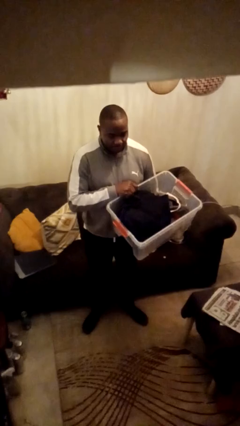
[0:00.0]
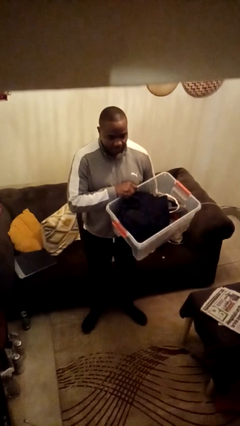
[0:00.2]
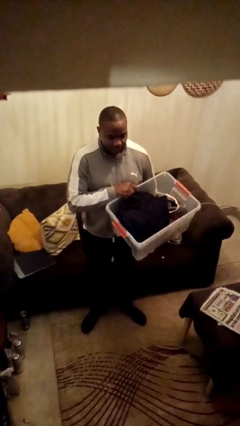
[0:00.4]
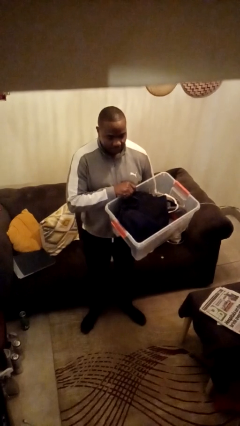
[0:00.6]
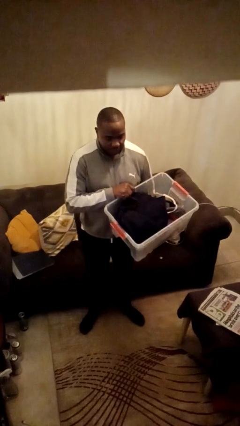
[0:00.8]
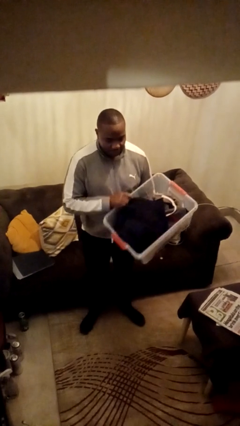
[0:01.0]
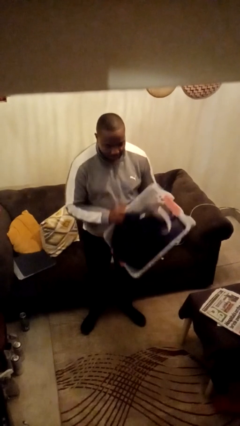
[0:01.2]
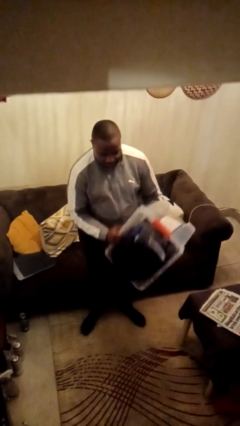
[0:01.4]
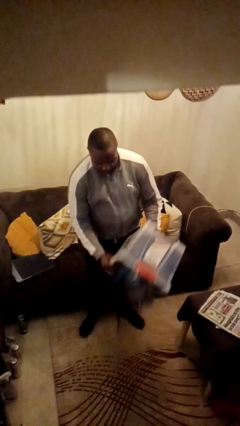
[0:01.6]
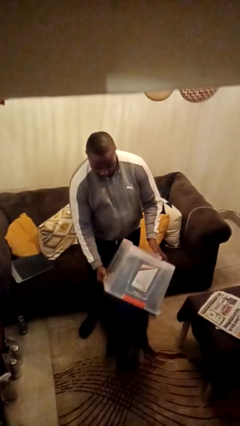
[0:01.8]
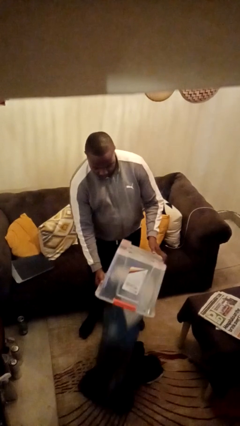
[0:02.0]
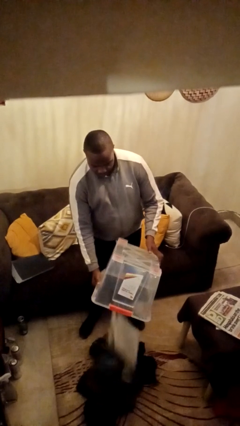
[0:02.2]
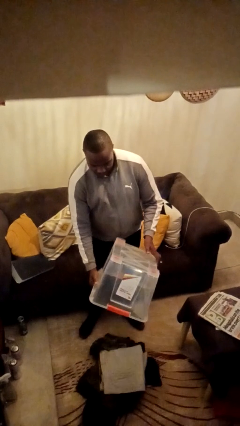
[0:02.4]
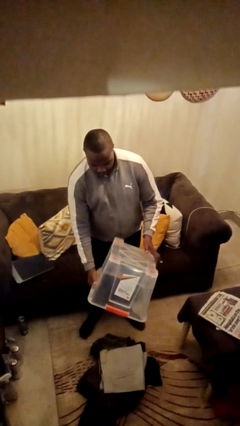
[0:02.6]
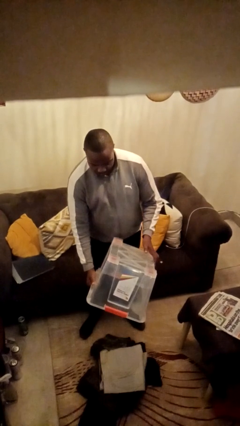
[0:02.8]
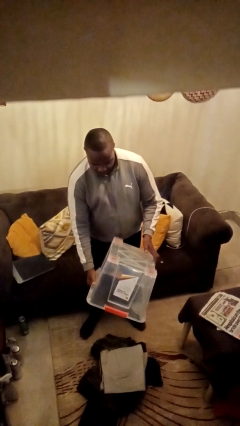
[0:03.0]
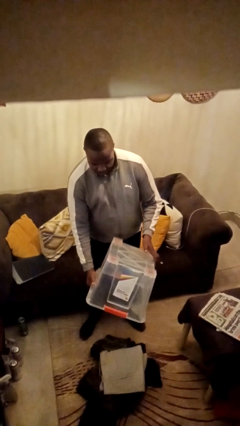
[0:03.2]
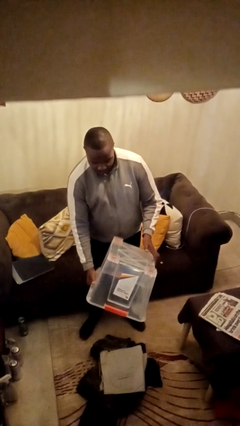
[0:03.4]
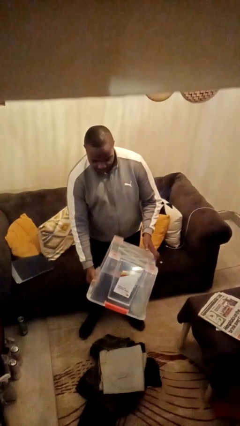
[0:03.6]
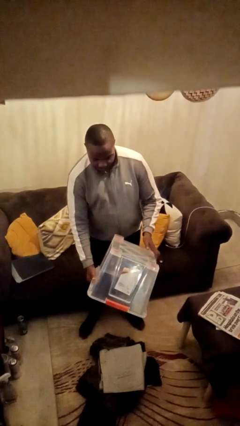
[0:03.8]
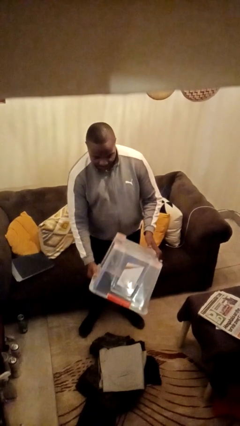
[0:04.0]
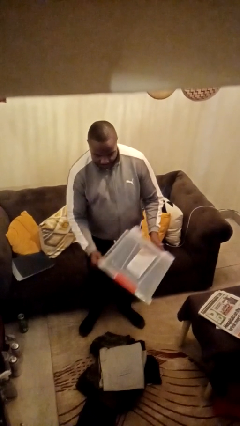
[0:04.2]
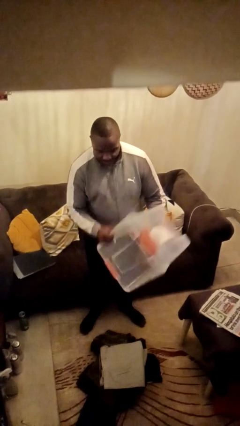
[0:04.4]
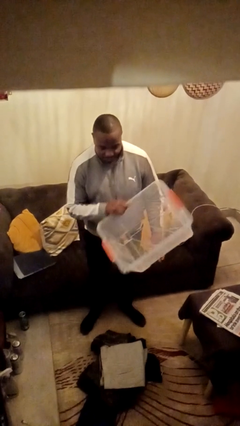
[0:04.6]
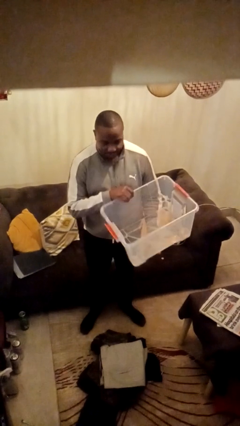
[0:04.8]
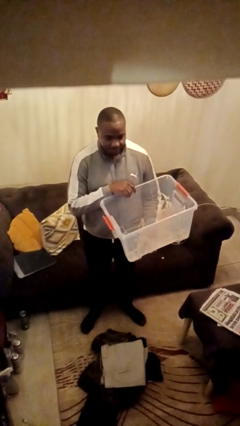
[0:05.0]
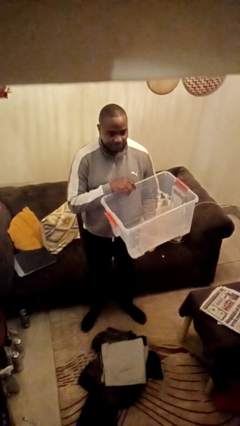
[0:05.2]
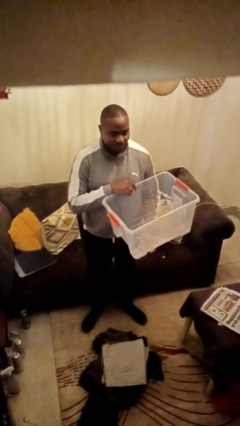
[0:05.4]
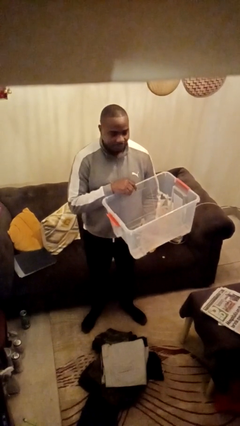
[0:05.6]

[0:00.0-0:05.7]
person unloads box onto floor

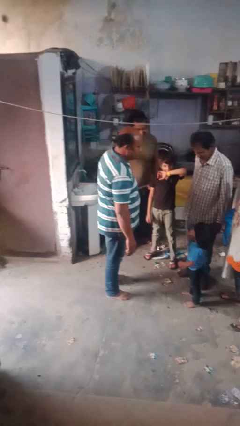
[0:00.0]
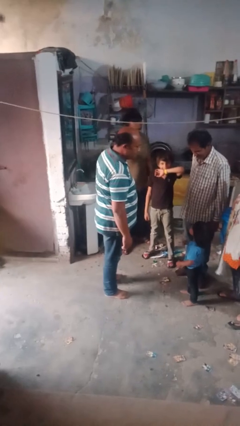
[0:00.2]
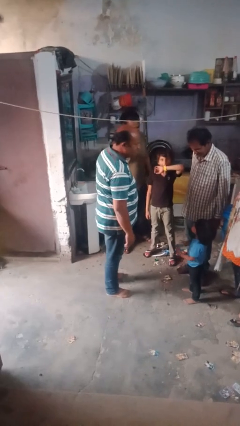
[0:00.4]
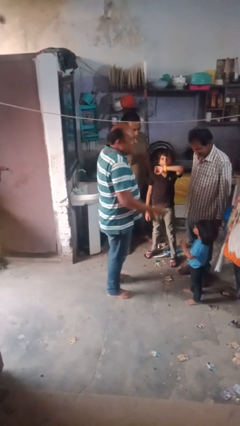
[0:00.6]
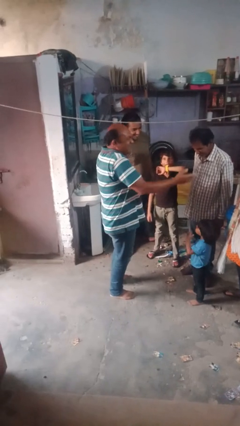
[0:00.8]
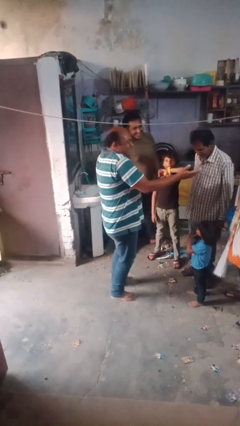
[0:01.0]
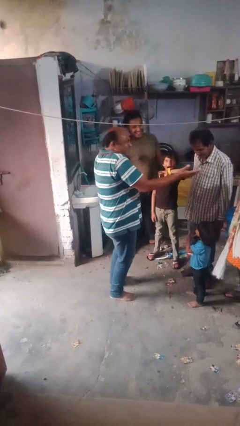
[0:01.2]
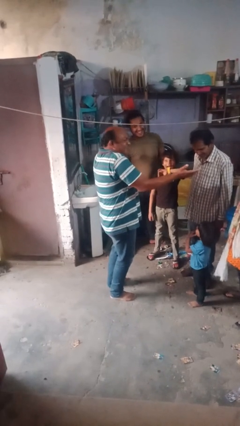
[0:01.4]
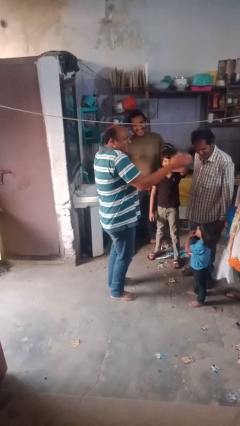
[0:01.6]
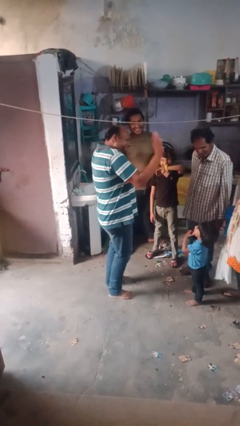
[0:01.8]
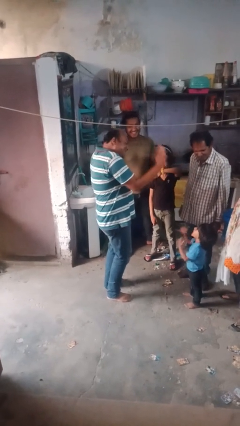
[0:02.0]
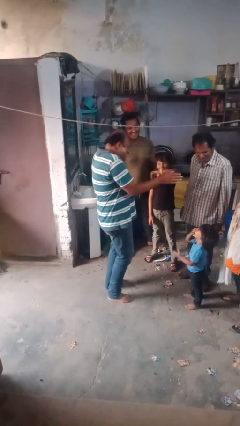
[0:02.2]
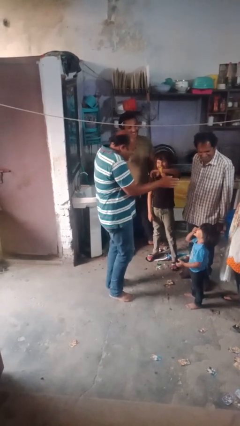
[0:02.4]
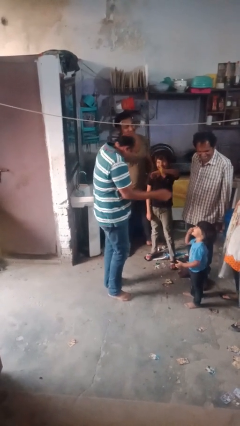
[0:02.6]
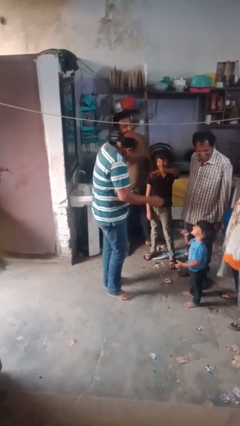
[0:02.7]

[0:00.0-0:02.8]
person laughs with person

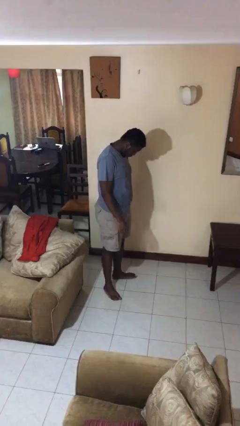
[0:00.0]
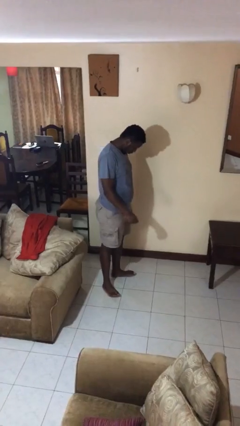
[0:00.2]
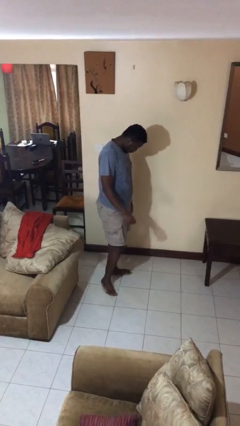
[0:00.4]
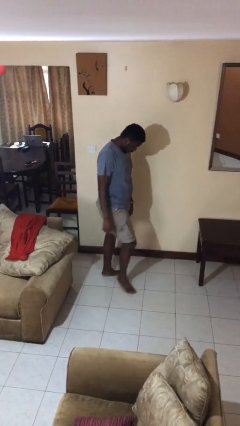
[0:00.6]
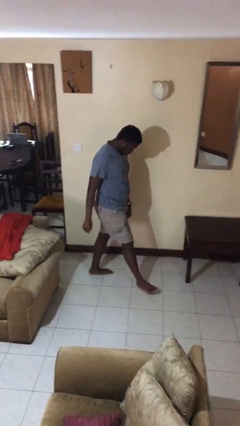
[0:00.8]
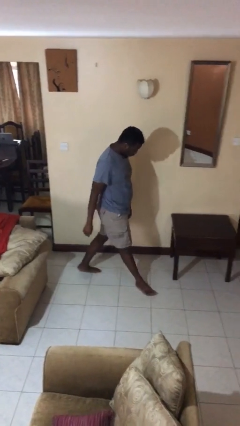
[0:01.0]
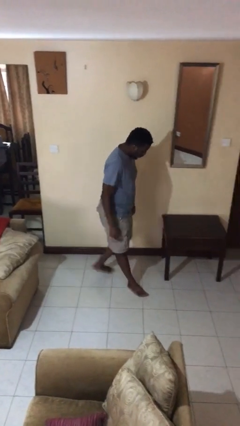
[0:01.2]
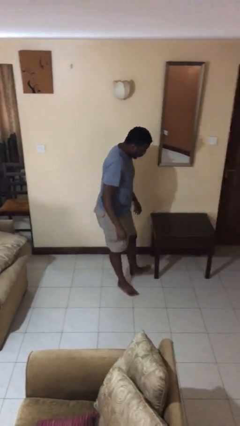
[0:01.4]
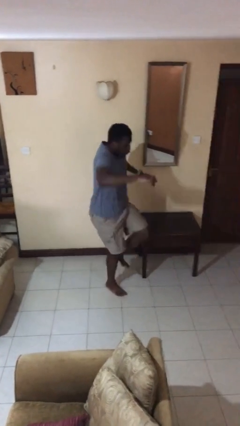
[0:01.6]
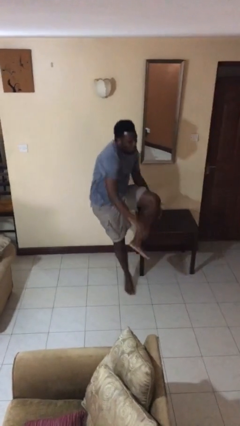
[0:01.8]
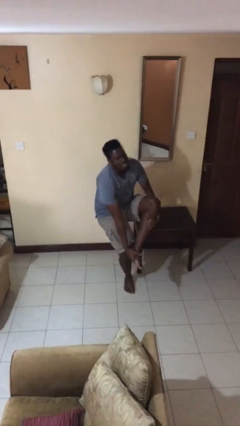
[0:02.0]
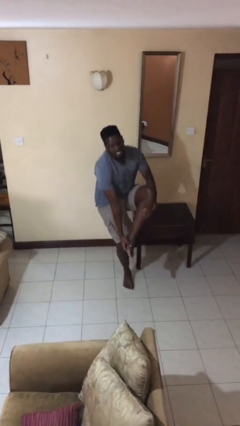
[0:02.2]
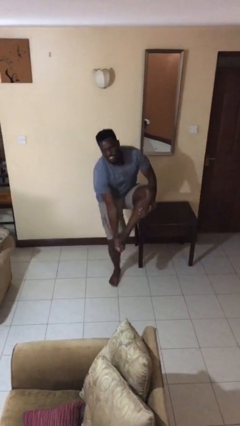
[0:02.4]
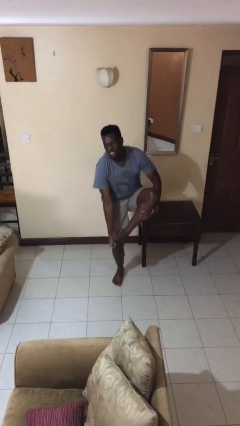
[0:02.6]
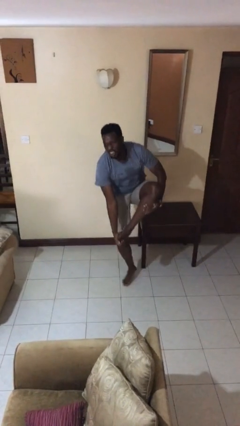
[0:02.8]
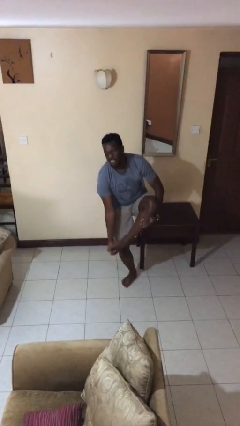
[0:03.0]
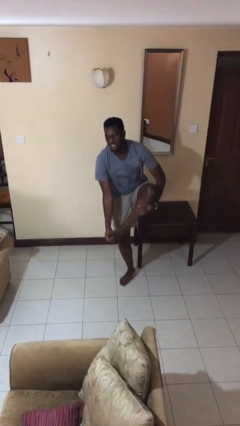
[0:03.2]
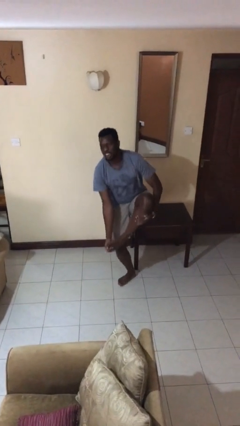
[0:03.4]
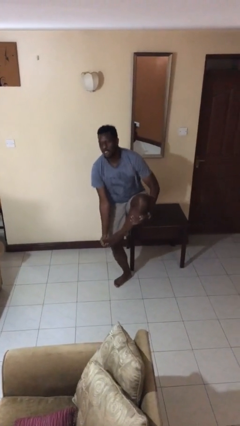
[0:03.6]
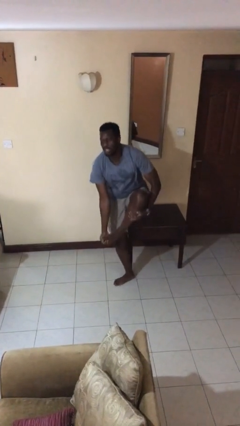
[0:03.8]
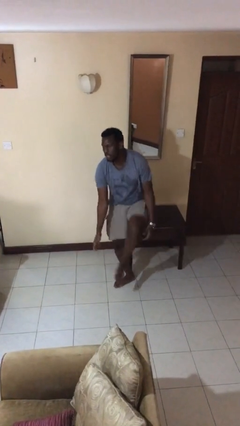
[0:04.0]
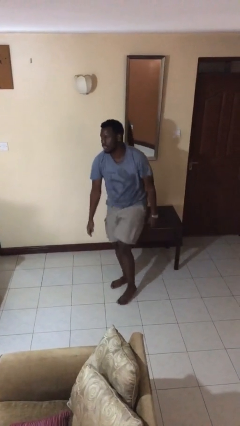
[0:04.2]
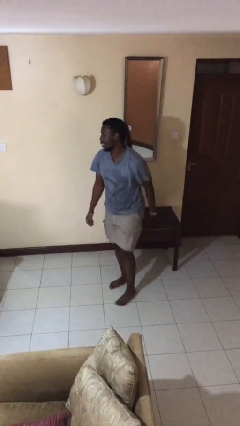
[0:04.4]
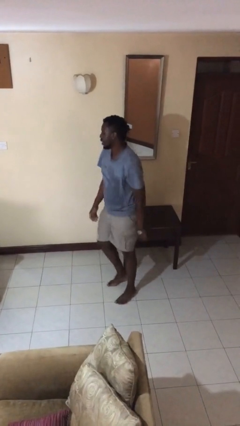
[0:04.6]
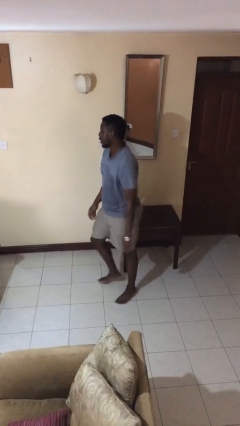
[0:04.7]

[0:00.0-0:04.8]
person stubs toe

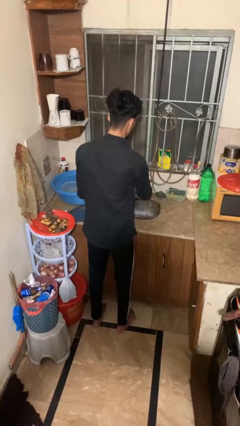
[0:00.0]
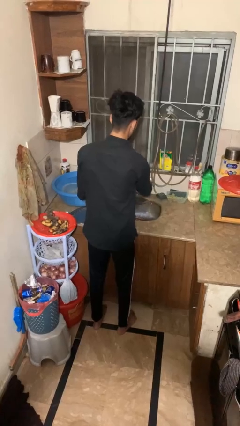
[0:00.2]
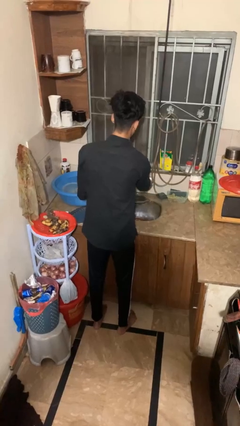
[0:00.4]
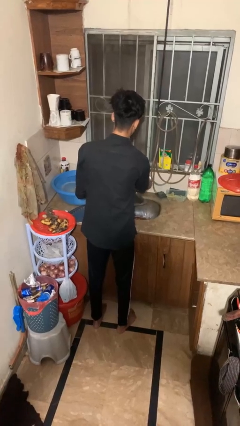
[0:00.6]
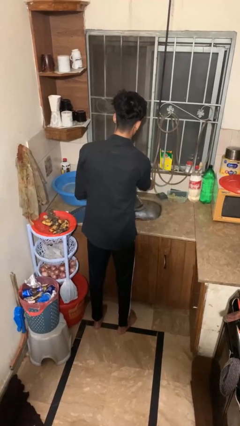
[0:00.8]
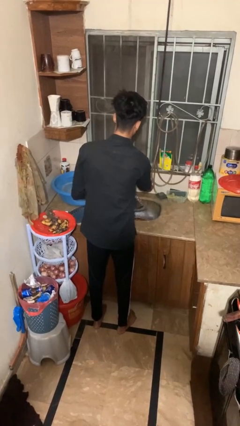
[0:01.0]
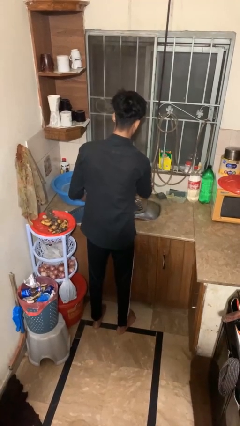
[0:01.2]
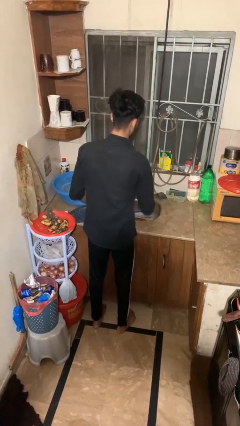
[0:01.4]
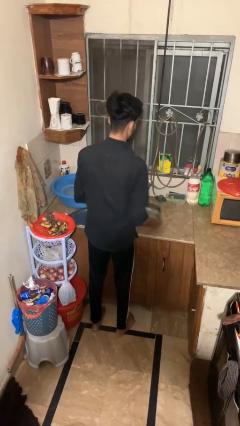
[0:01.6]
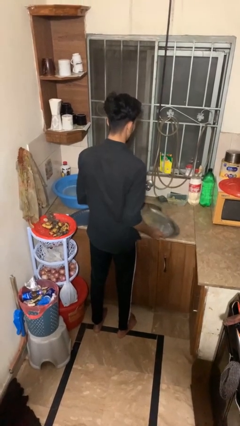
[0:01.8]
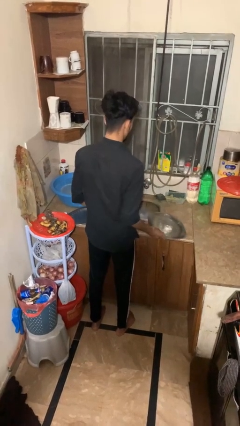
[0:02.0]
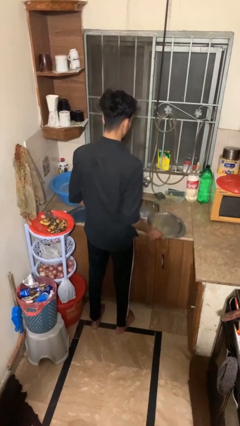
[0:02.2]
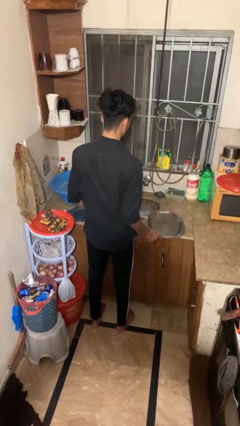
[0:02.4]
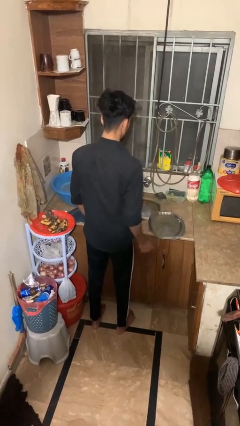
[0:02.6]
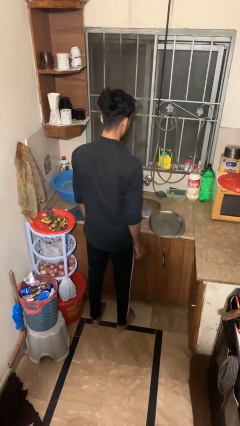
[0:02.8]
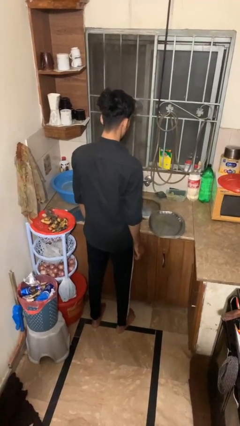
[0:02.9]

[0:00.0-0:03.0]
person closes dishwasher

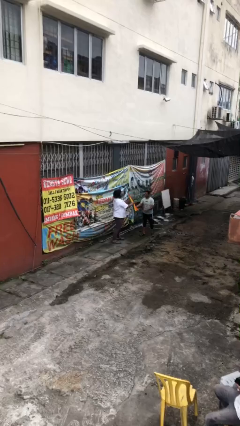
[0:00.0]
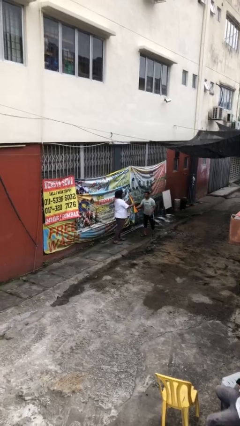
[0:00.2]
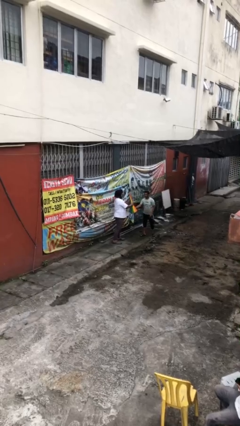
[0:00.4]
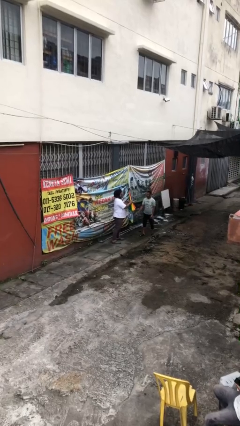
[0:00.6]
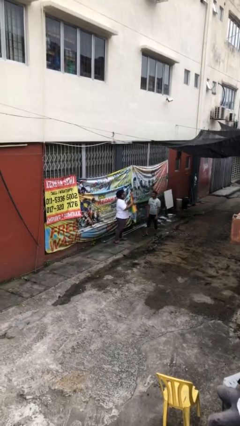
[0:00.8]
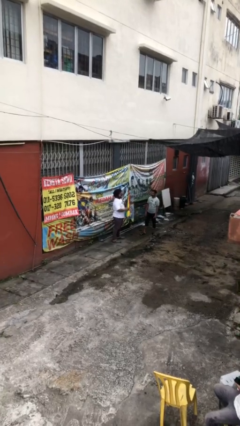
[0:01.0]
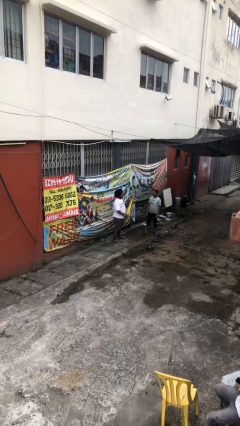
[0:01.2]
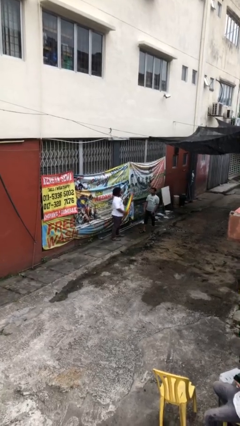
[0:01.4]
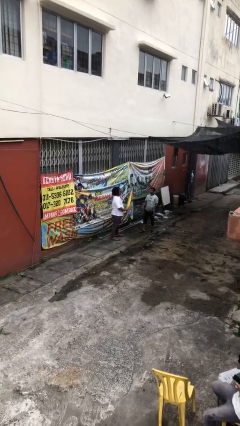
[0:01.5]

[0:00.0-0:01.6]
person transfers object to person
